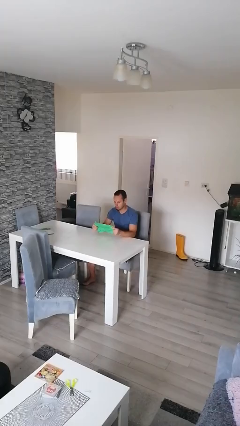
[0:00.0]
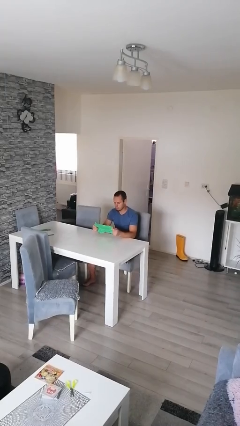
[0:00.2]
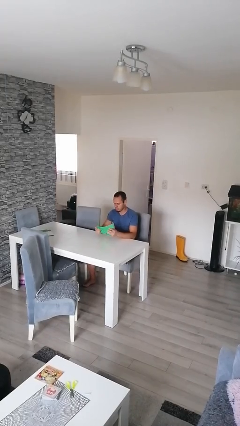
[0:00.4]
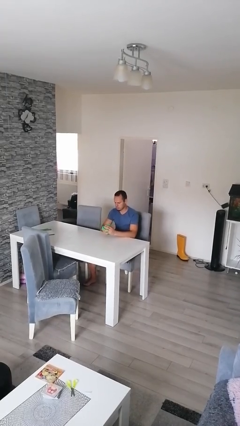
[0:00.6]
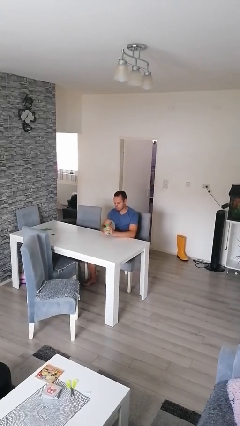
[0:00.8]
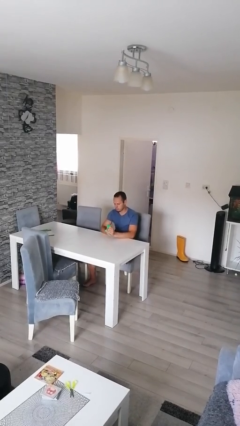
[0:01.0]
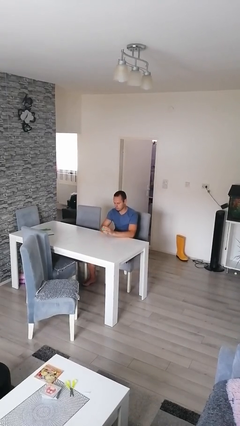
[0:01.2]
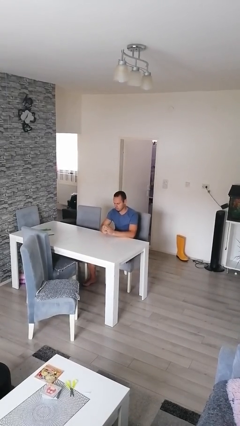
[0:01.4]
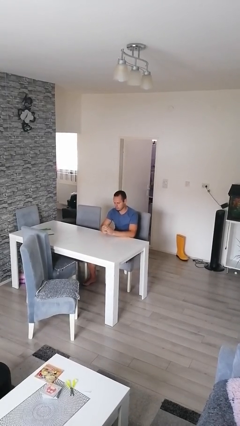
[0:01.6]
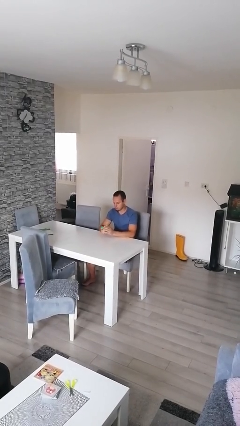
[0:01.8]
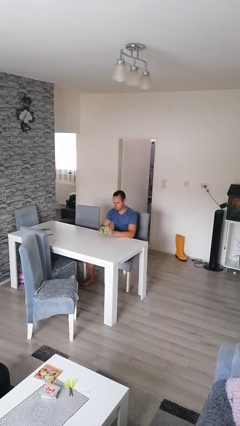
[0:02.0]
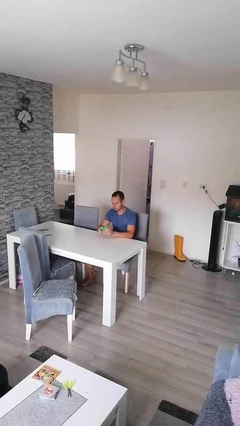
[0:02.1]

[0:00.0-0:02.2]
person crumples paper

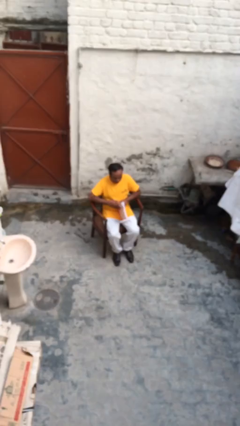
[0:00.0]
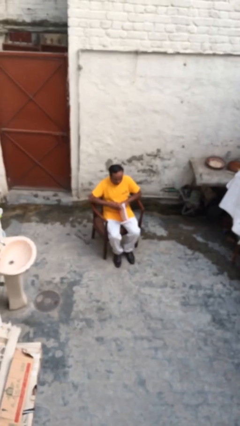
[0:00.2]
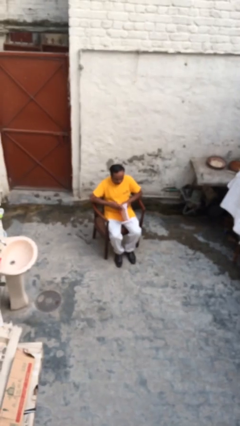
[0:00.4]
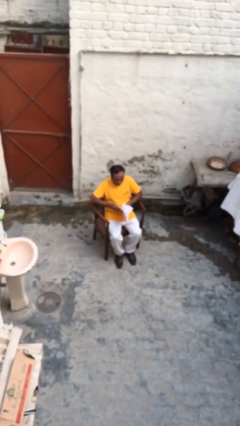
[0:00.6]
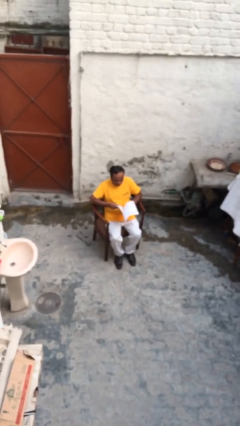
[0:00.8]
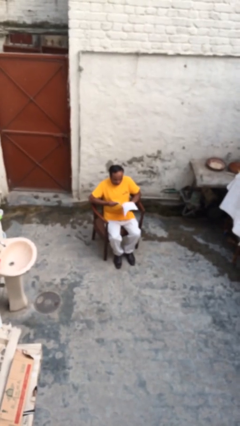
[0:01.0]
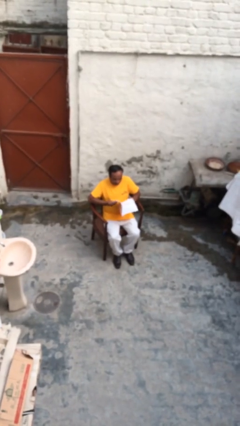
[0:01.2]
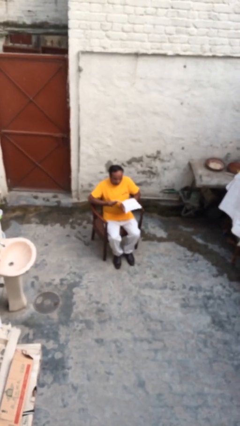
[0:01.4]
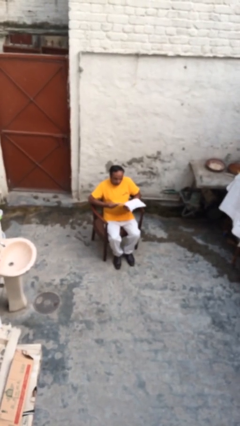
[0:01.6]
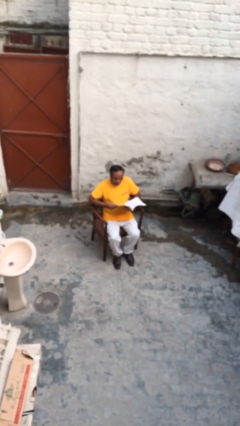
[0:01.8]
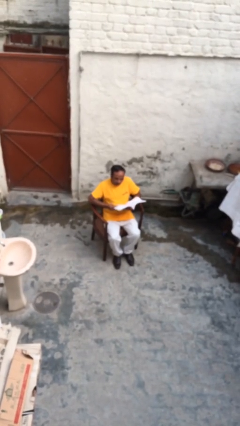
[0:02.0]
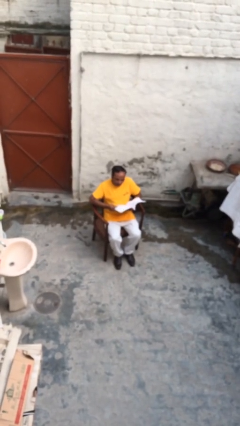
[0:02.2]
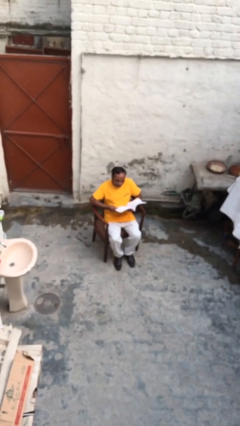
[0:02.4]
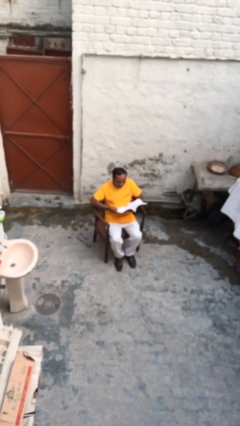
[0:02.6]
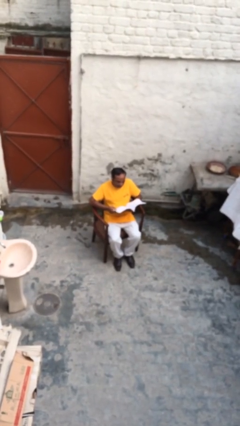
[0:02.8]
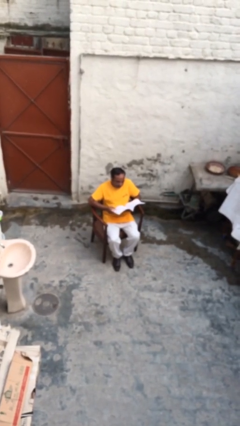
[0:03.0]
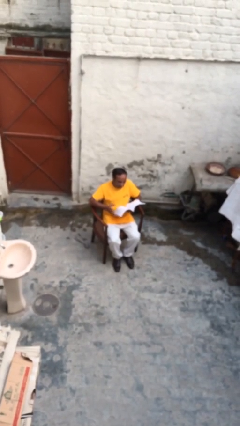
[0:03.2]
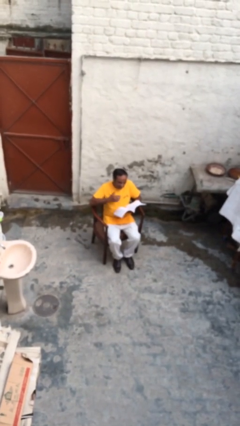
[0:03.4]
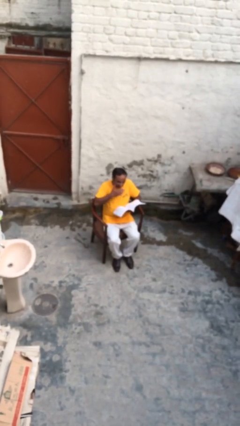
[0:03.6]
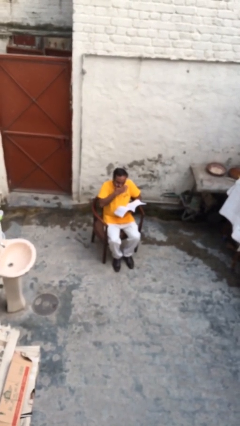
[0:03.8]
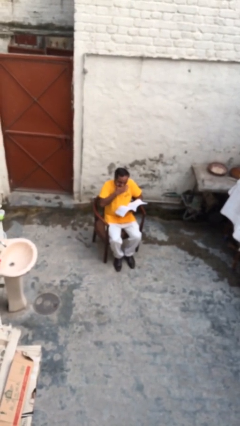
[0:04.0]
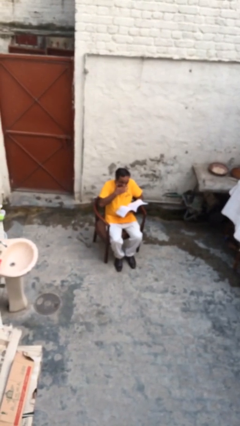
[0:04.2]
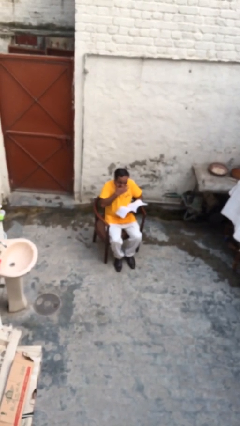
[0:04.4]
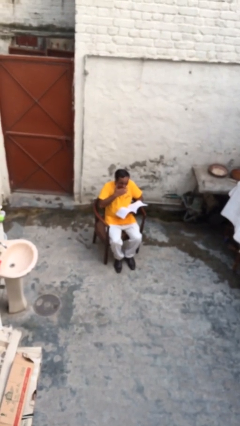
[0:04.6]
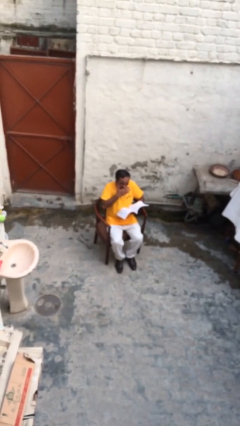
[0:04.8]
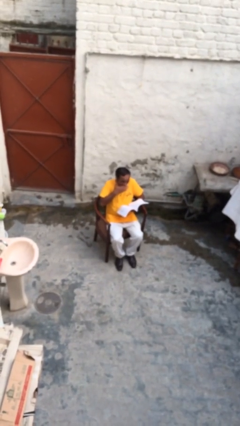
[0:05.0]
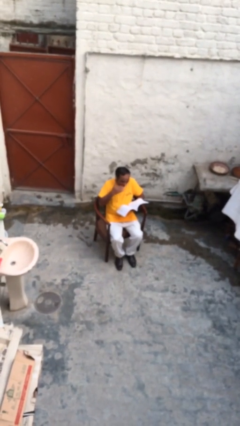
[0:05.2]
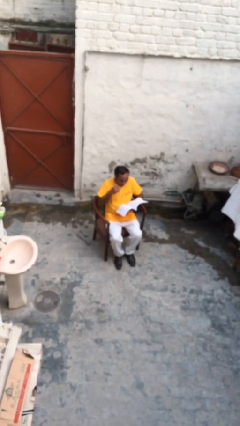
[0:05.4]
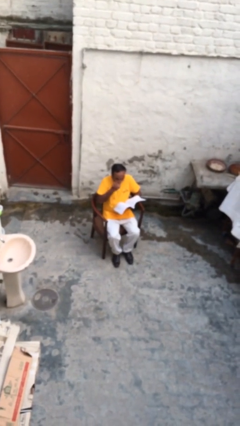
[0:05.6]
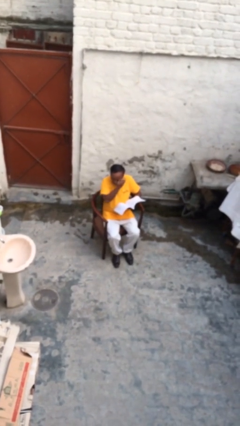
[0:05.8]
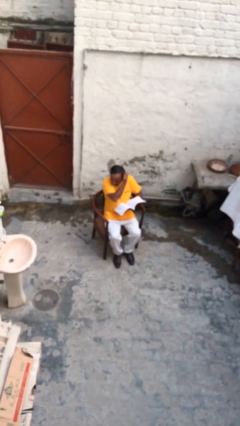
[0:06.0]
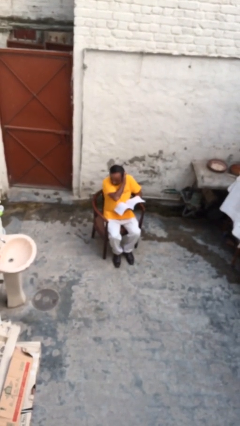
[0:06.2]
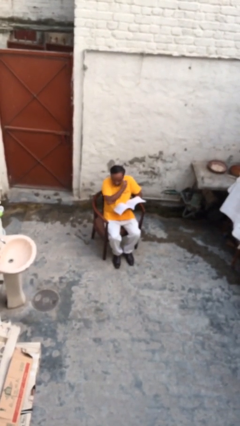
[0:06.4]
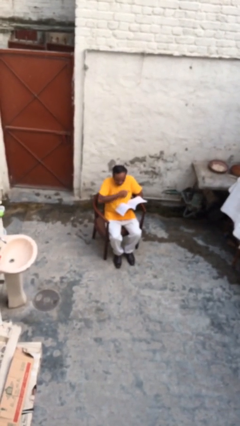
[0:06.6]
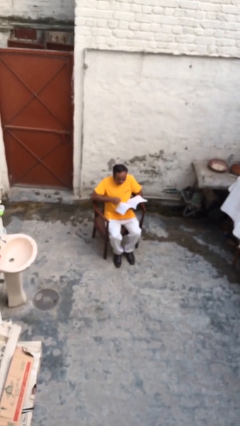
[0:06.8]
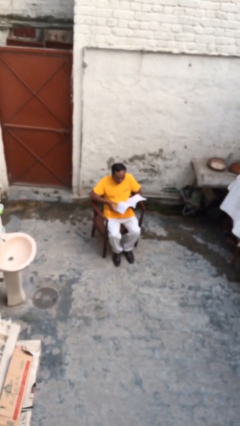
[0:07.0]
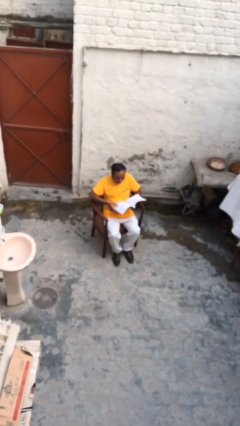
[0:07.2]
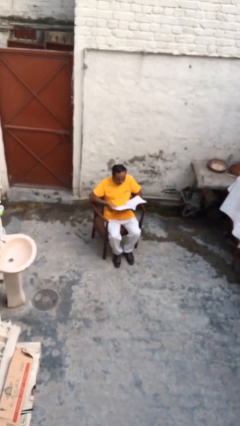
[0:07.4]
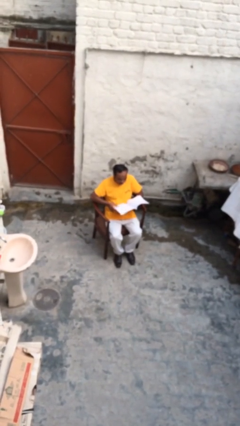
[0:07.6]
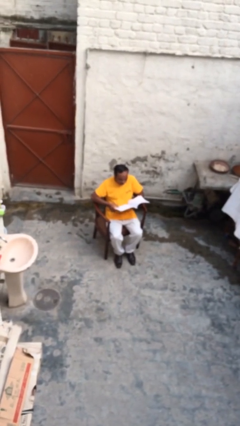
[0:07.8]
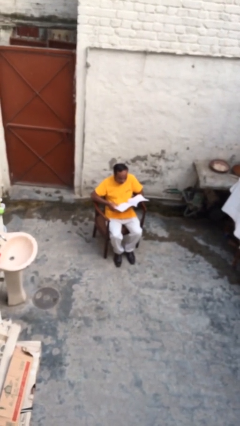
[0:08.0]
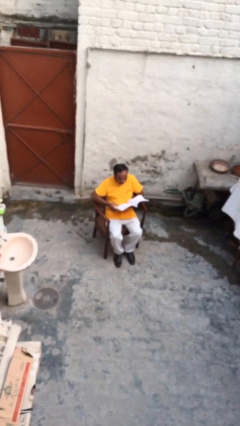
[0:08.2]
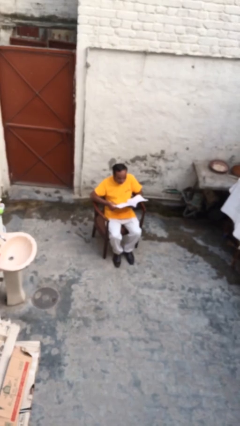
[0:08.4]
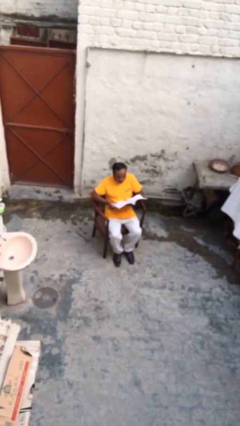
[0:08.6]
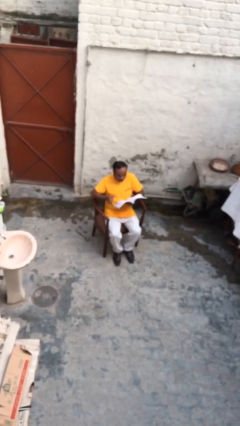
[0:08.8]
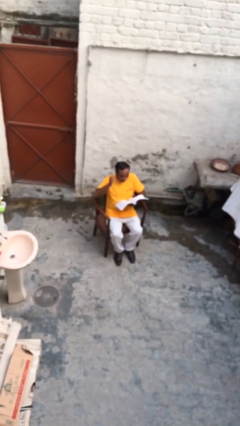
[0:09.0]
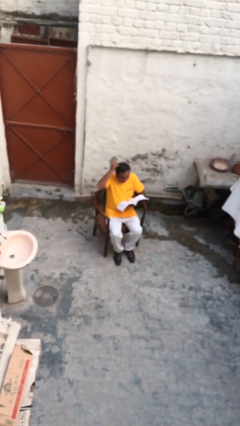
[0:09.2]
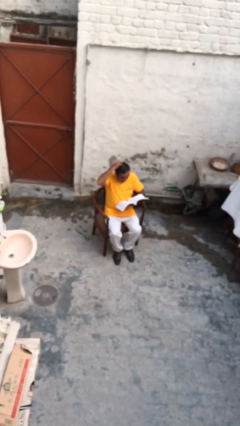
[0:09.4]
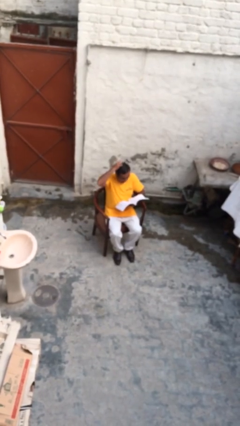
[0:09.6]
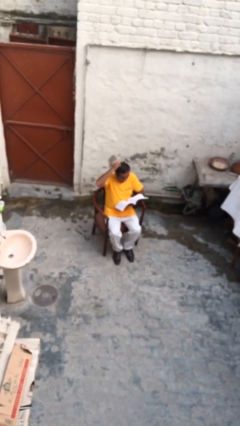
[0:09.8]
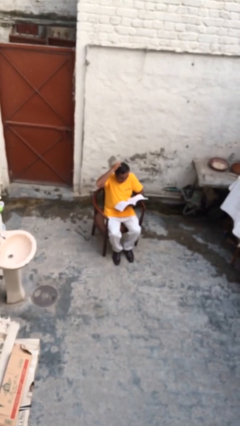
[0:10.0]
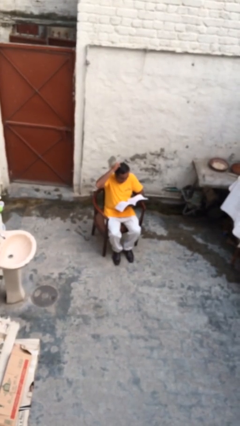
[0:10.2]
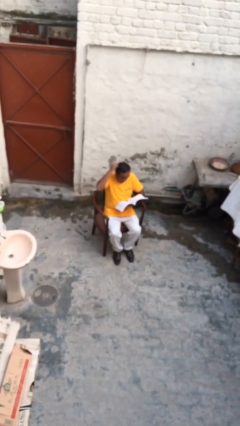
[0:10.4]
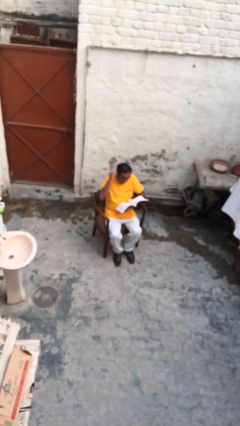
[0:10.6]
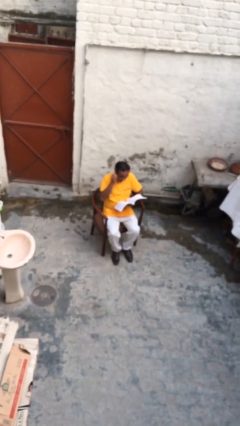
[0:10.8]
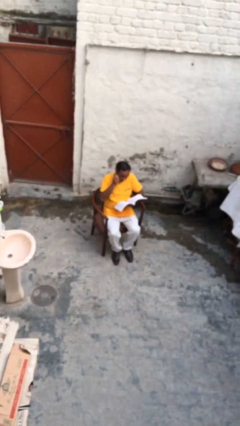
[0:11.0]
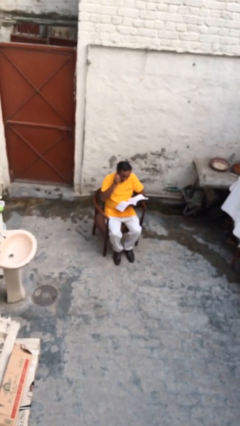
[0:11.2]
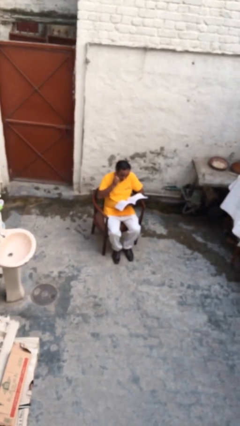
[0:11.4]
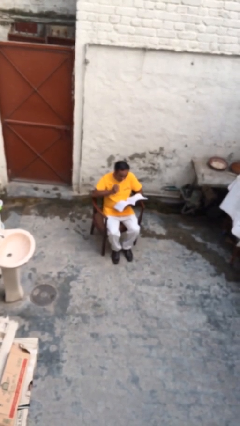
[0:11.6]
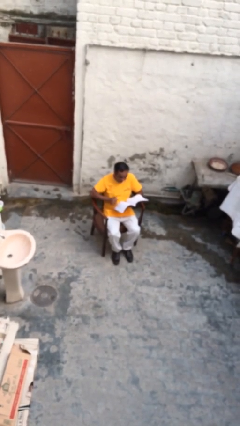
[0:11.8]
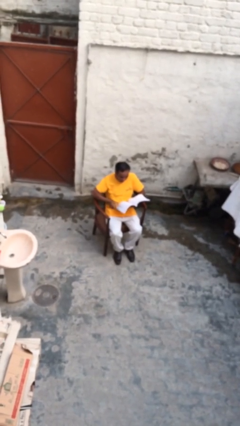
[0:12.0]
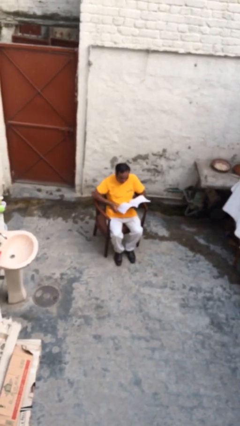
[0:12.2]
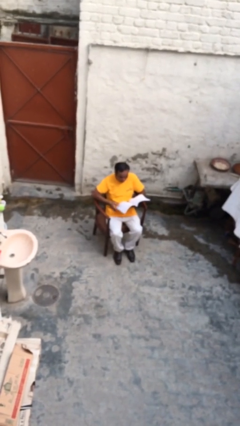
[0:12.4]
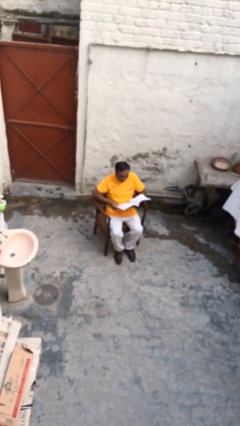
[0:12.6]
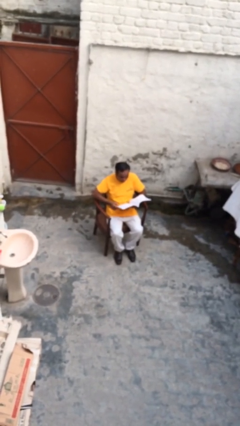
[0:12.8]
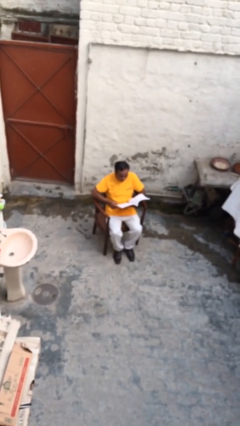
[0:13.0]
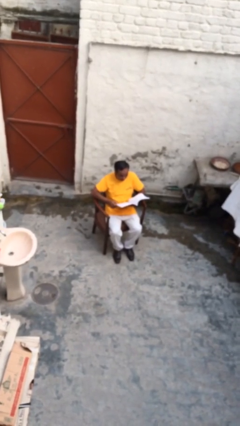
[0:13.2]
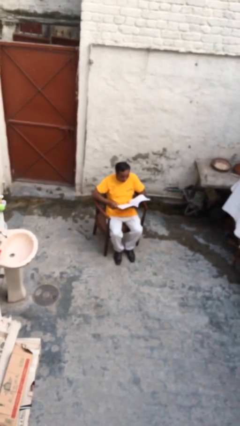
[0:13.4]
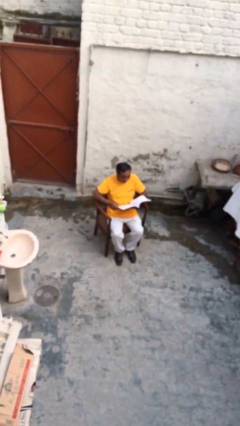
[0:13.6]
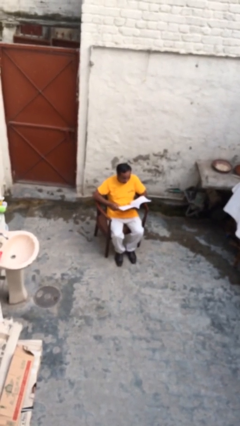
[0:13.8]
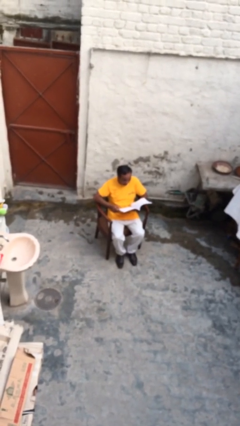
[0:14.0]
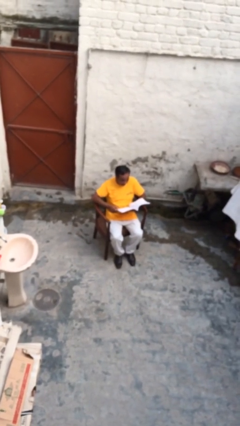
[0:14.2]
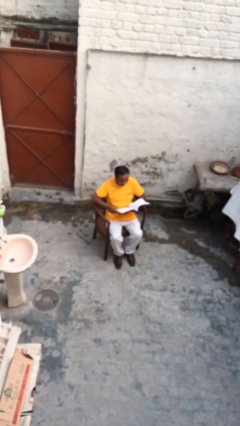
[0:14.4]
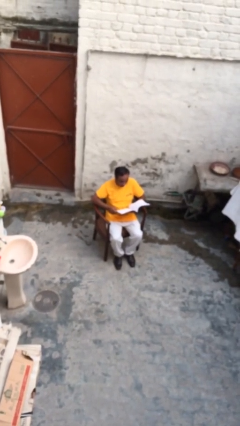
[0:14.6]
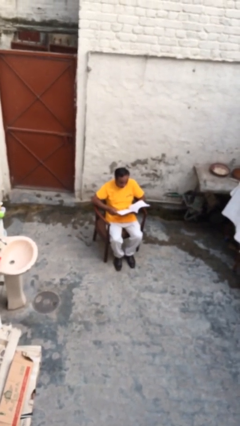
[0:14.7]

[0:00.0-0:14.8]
person reads document

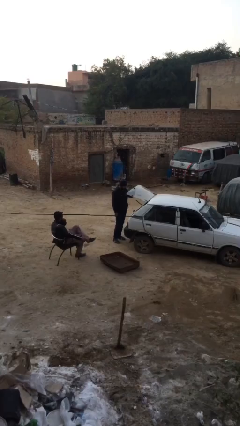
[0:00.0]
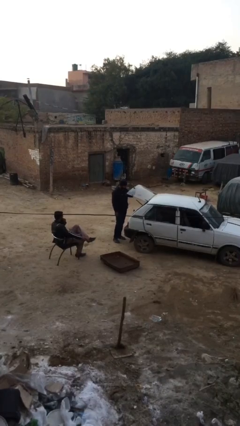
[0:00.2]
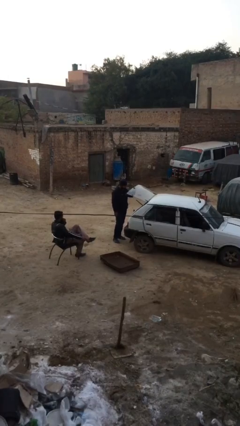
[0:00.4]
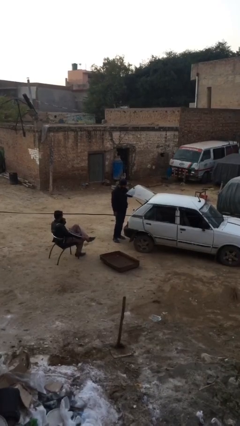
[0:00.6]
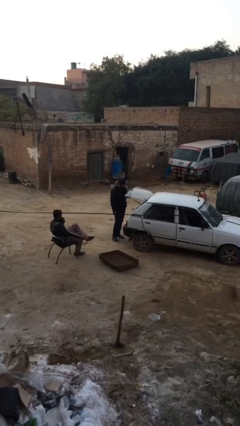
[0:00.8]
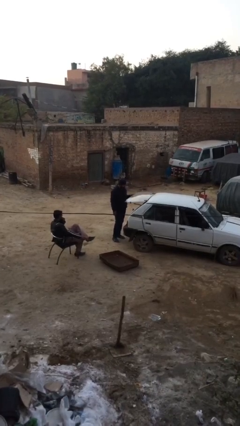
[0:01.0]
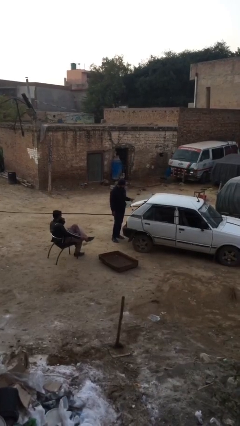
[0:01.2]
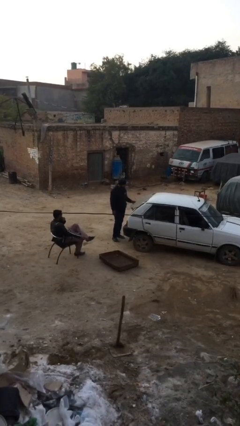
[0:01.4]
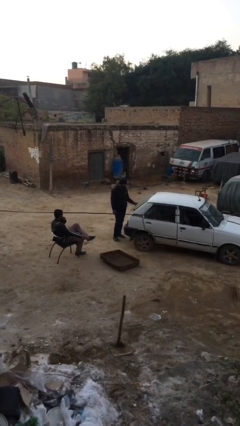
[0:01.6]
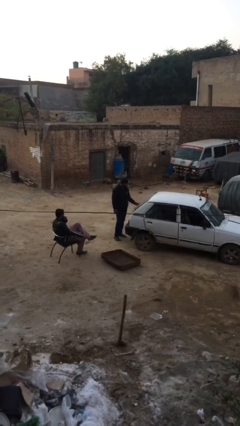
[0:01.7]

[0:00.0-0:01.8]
person closes car trunk
